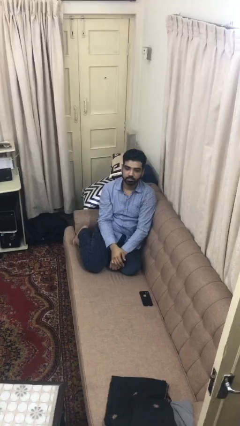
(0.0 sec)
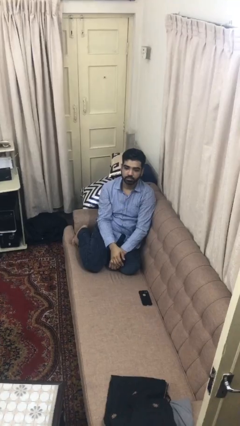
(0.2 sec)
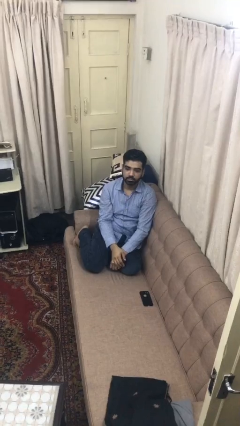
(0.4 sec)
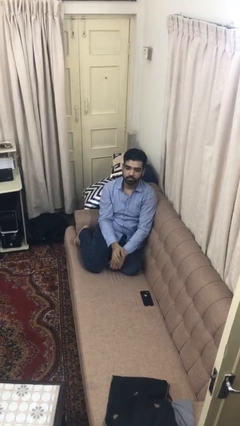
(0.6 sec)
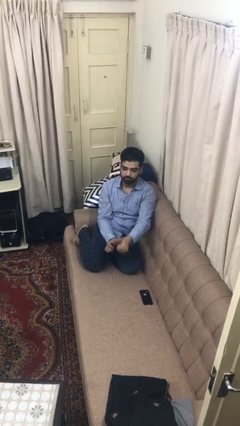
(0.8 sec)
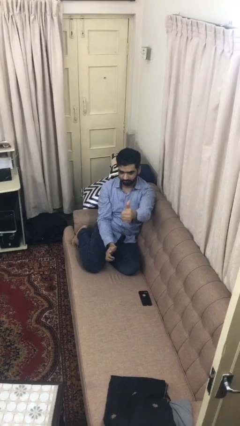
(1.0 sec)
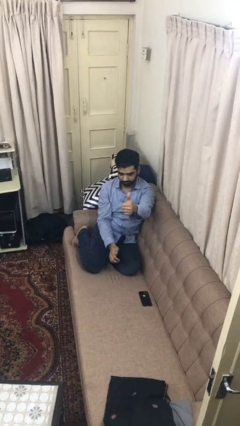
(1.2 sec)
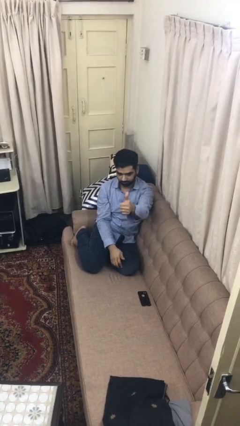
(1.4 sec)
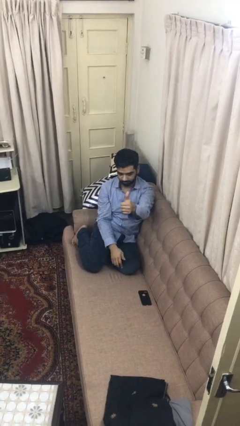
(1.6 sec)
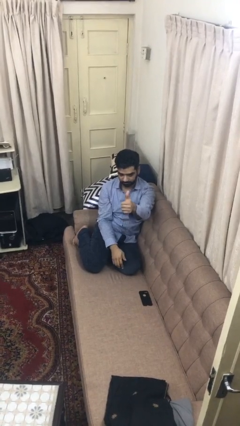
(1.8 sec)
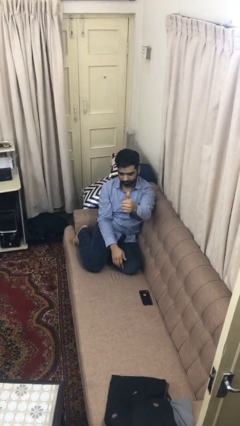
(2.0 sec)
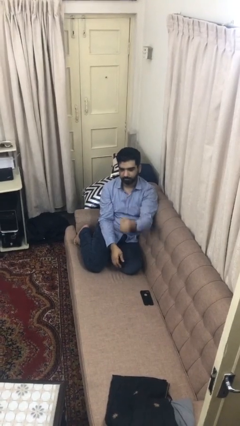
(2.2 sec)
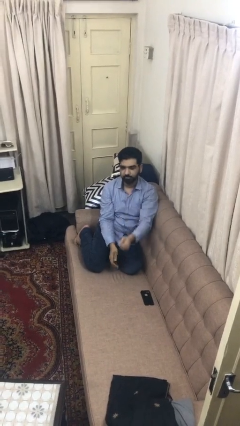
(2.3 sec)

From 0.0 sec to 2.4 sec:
person gestures thumbs up

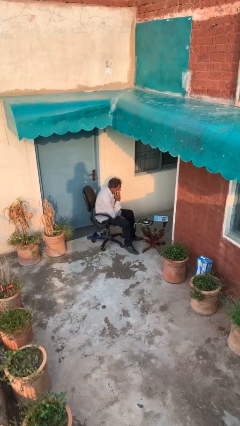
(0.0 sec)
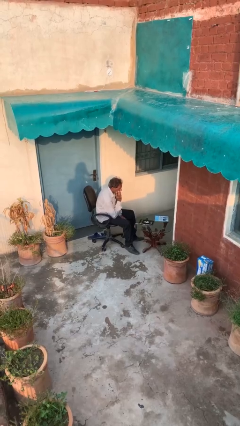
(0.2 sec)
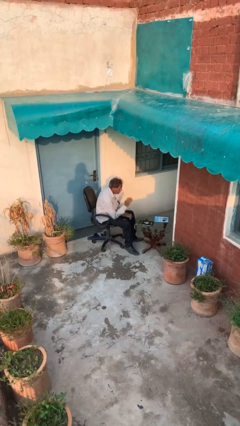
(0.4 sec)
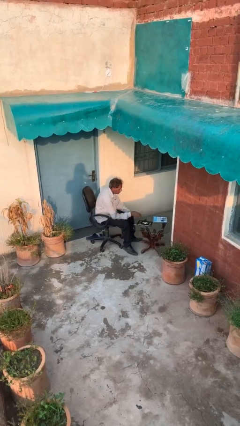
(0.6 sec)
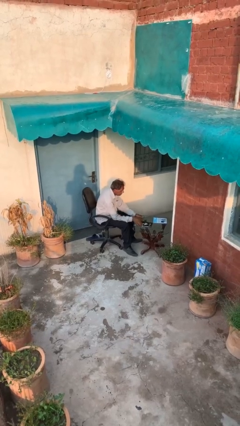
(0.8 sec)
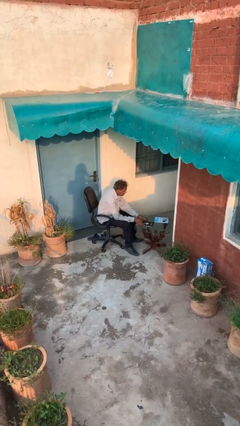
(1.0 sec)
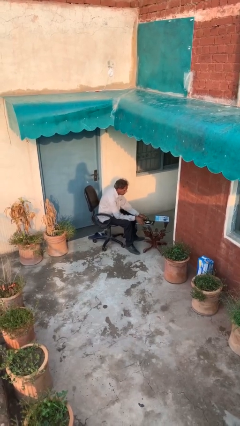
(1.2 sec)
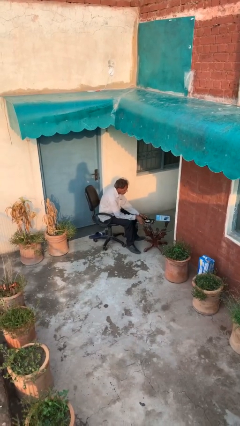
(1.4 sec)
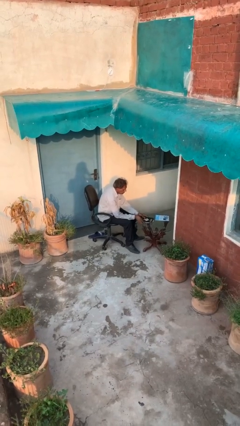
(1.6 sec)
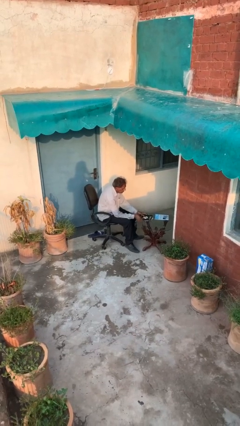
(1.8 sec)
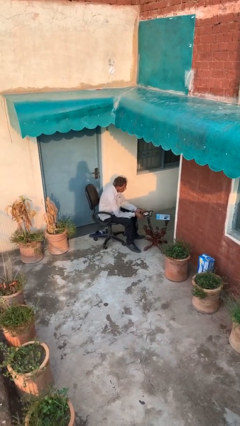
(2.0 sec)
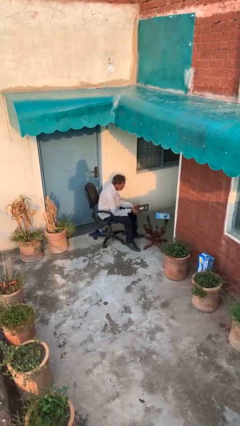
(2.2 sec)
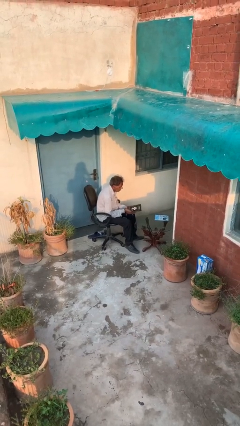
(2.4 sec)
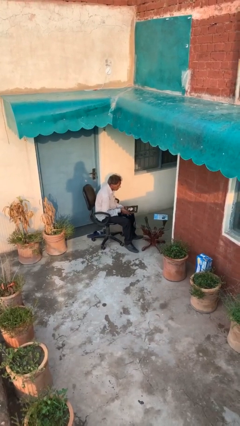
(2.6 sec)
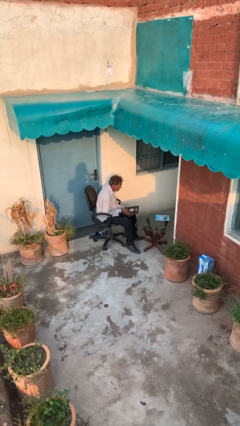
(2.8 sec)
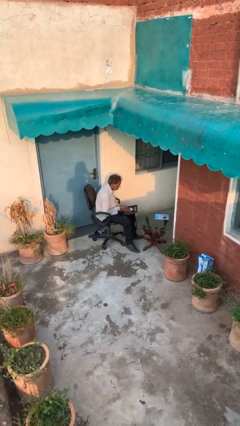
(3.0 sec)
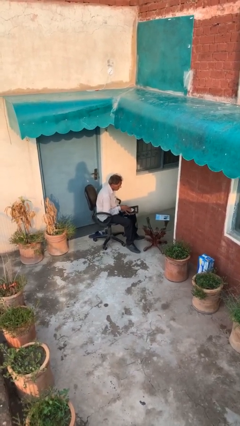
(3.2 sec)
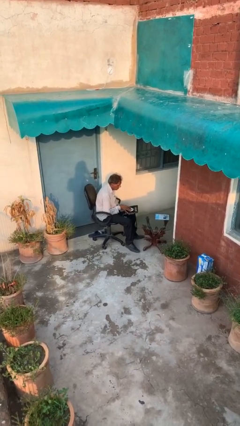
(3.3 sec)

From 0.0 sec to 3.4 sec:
person picks up object from table

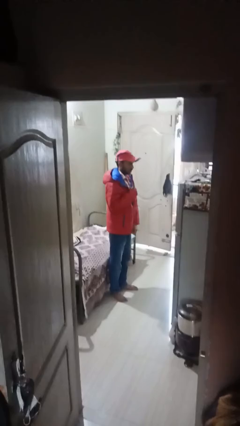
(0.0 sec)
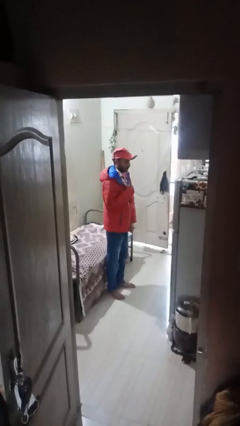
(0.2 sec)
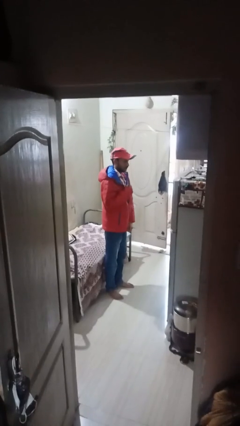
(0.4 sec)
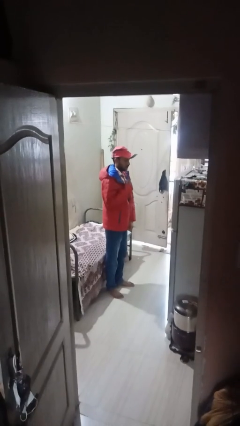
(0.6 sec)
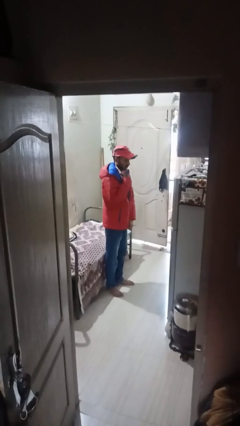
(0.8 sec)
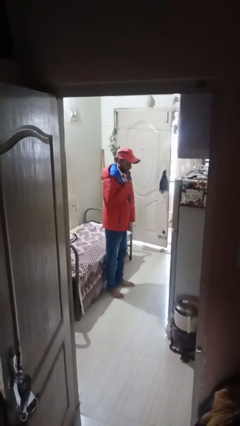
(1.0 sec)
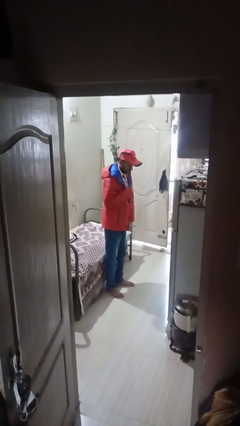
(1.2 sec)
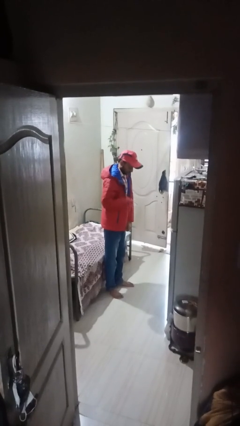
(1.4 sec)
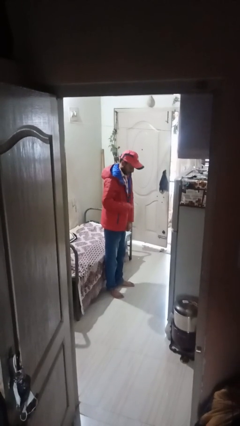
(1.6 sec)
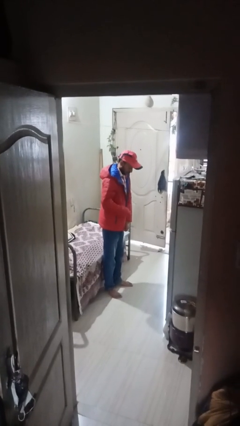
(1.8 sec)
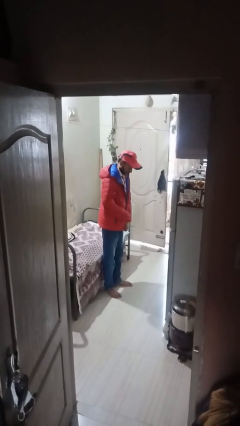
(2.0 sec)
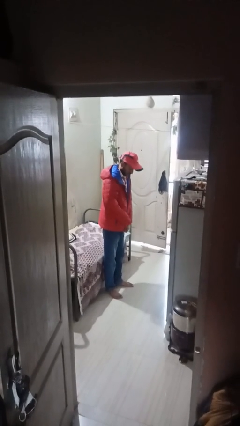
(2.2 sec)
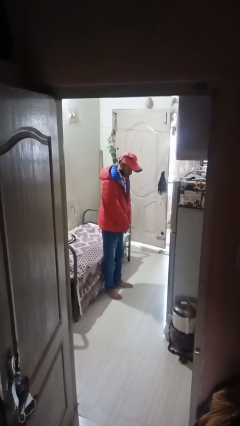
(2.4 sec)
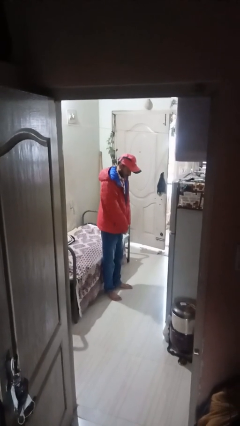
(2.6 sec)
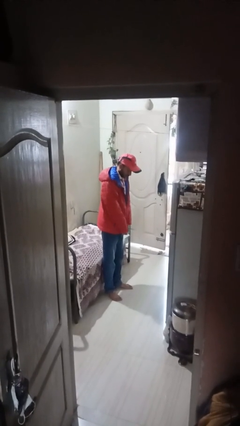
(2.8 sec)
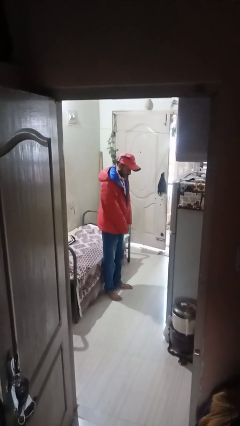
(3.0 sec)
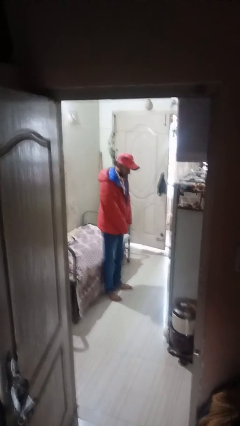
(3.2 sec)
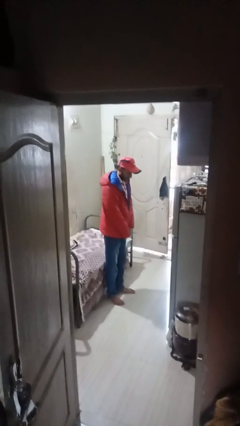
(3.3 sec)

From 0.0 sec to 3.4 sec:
person unzips jacket

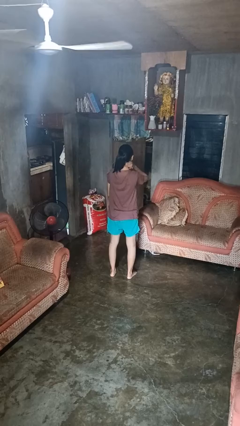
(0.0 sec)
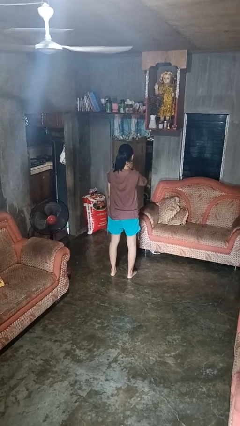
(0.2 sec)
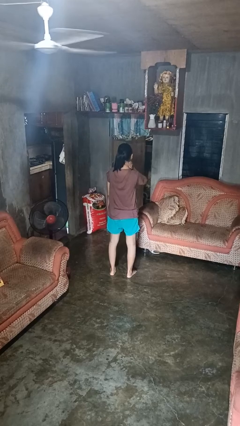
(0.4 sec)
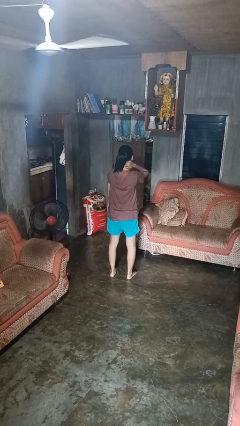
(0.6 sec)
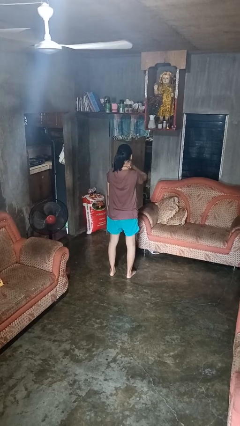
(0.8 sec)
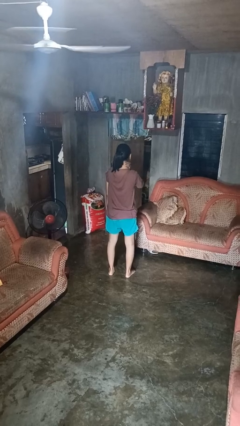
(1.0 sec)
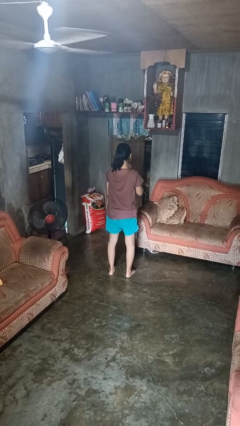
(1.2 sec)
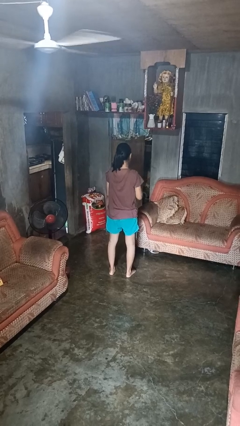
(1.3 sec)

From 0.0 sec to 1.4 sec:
person rubs neck

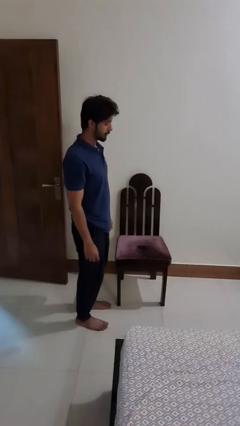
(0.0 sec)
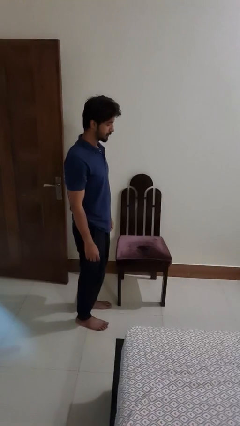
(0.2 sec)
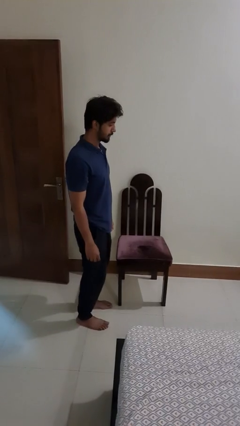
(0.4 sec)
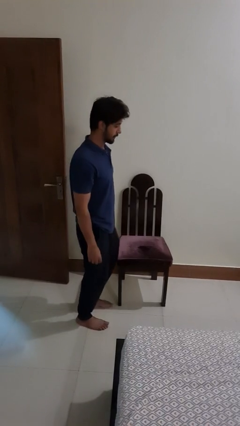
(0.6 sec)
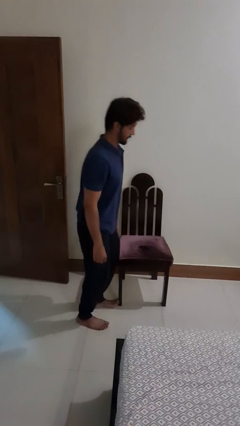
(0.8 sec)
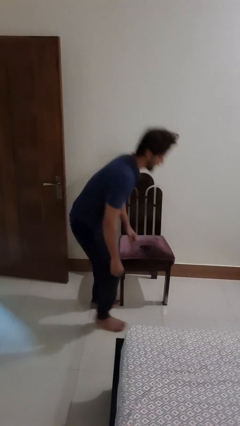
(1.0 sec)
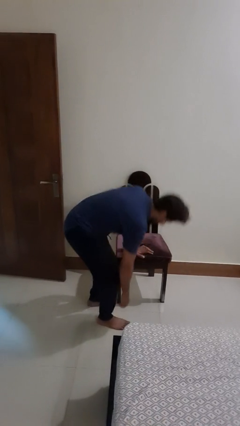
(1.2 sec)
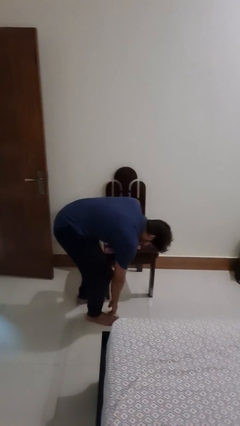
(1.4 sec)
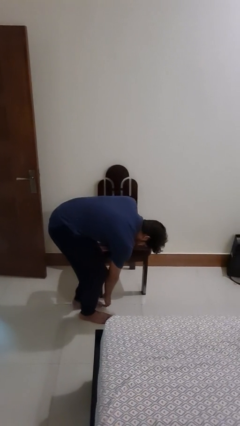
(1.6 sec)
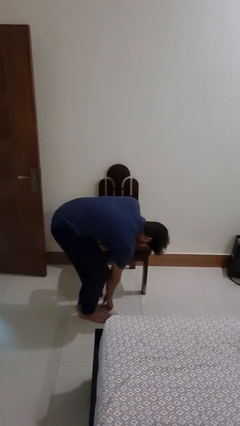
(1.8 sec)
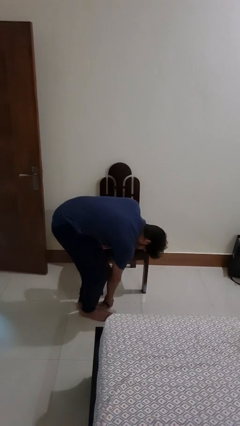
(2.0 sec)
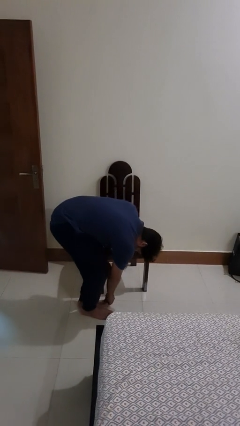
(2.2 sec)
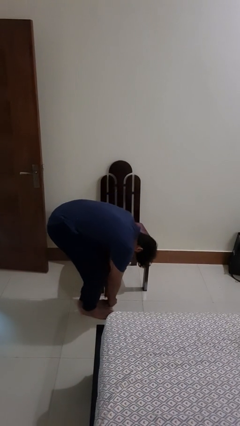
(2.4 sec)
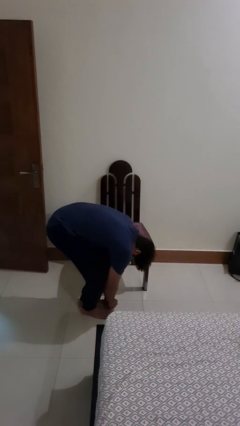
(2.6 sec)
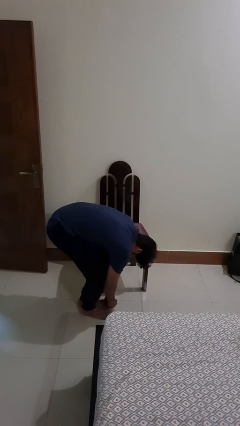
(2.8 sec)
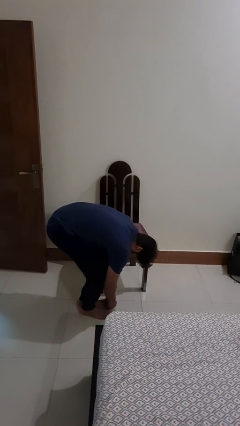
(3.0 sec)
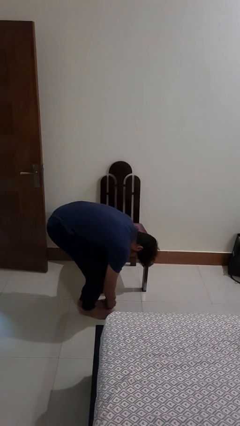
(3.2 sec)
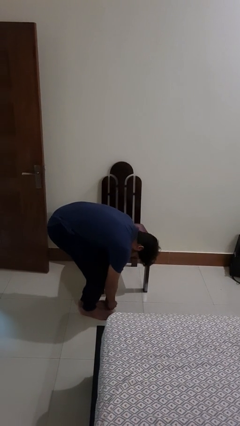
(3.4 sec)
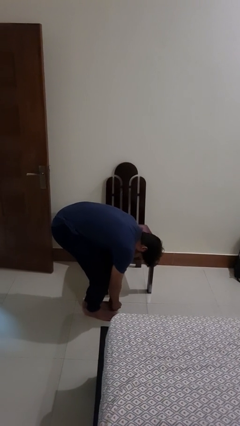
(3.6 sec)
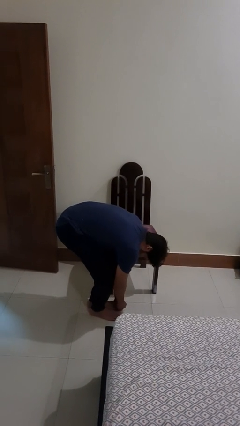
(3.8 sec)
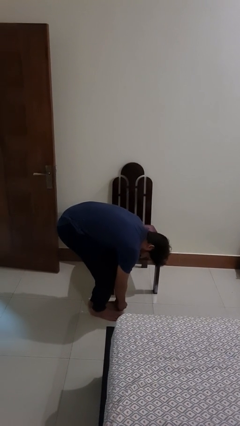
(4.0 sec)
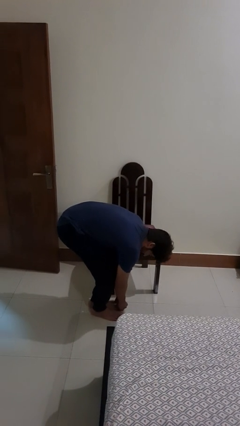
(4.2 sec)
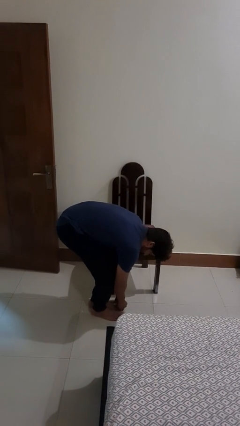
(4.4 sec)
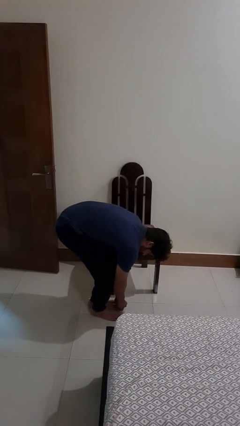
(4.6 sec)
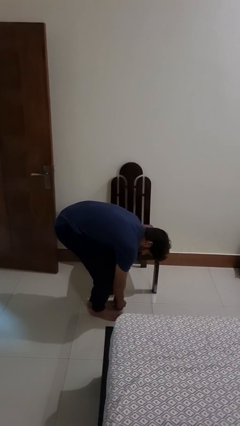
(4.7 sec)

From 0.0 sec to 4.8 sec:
person stubs toe

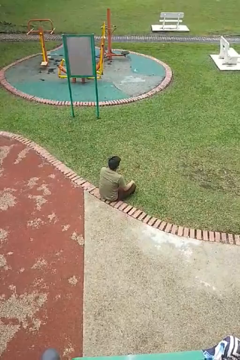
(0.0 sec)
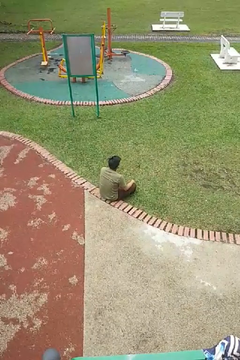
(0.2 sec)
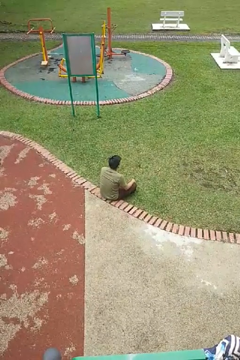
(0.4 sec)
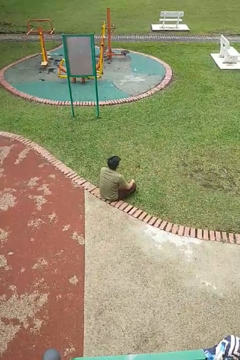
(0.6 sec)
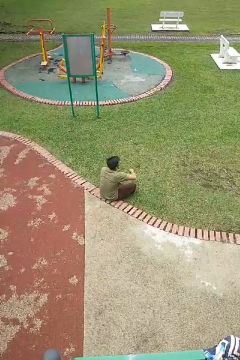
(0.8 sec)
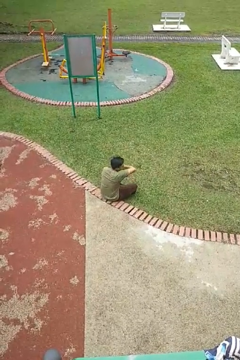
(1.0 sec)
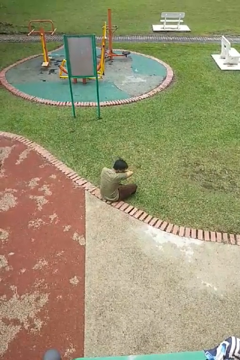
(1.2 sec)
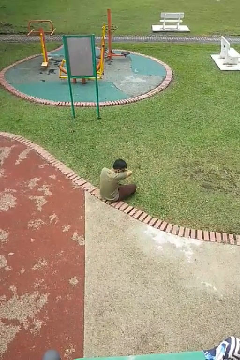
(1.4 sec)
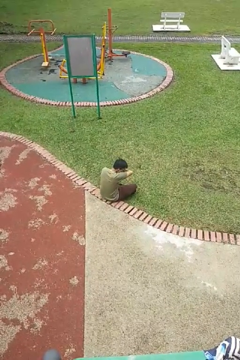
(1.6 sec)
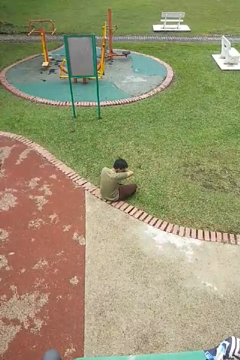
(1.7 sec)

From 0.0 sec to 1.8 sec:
person sneezes into arm

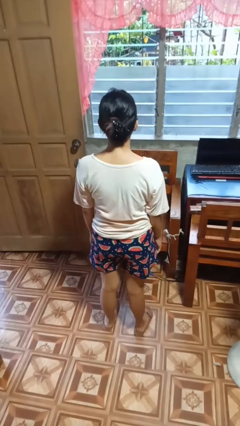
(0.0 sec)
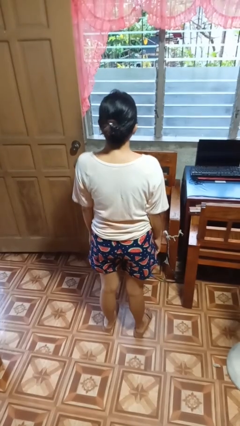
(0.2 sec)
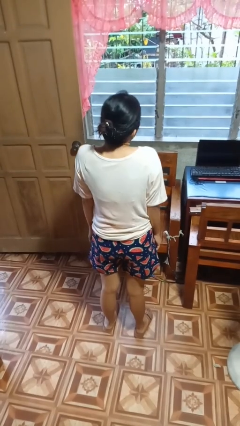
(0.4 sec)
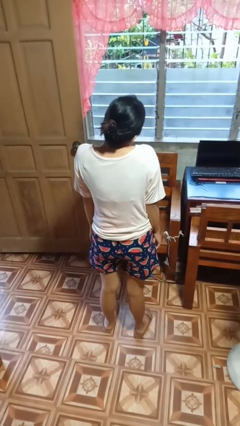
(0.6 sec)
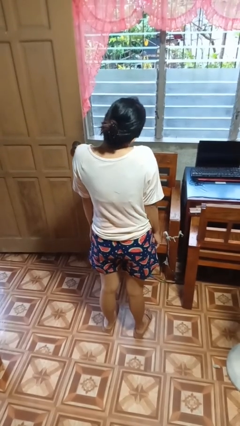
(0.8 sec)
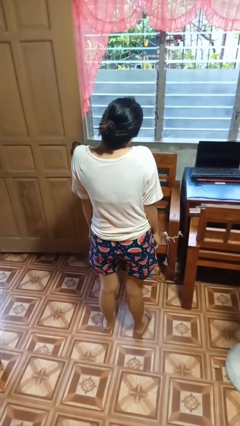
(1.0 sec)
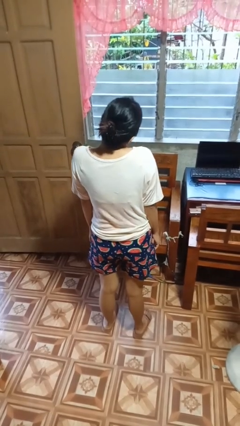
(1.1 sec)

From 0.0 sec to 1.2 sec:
person shrugs
